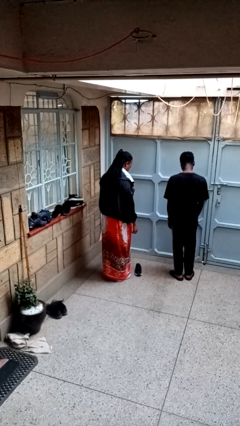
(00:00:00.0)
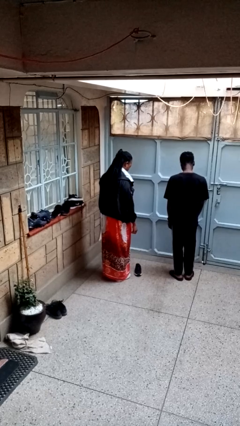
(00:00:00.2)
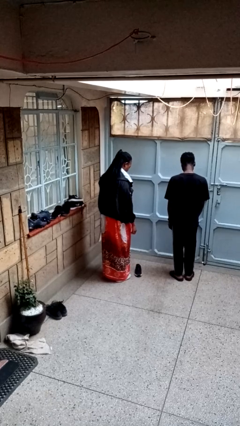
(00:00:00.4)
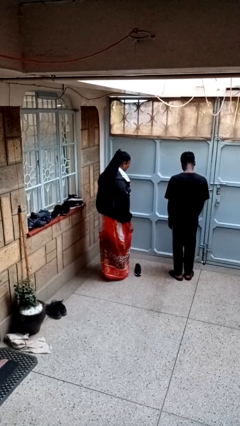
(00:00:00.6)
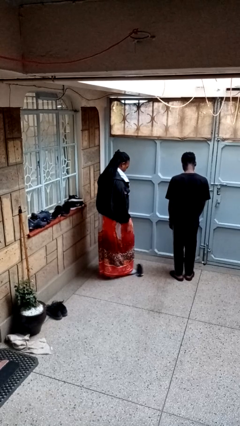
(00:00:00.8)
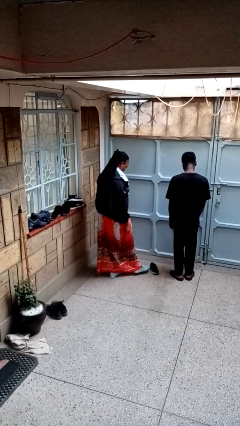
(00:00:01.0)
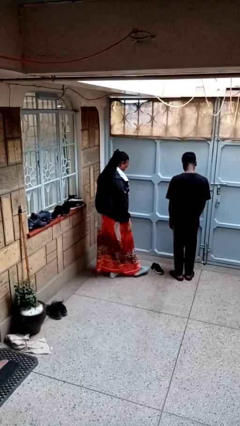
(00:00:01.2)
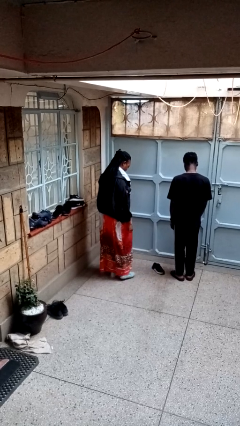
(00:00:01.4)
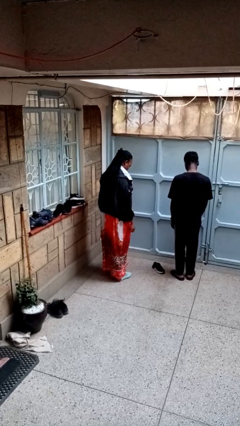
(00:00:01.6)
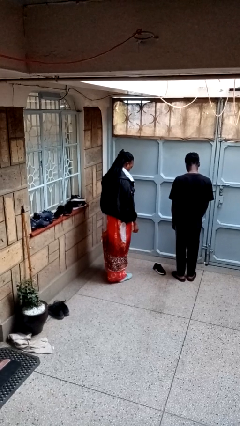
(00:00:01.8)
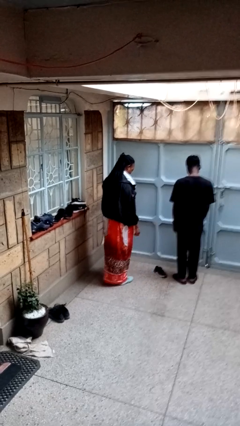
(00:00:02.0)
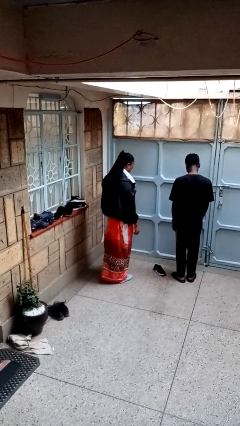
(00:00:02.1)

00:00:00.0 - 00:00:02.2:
person kicks object to person

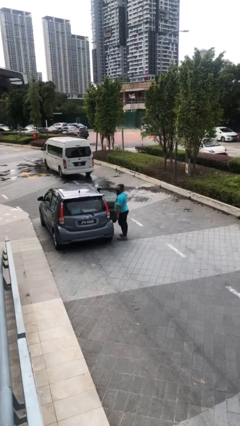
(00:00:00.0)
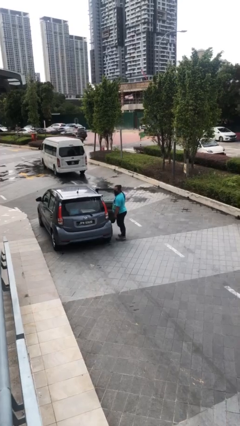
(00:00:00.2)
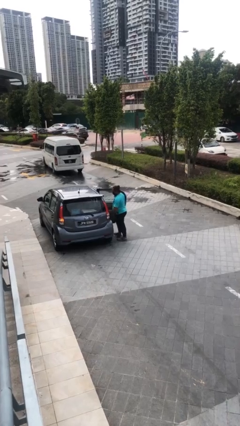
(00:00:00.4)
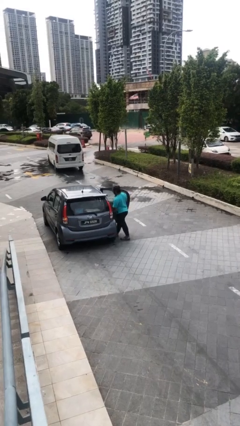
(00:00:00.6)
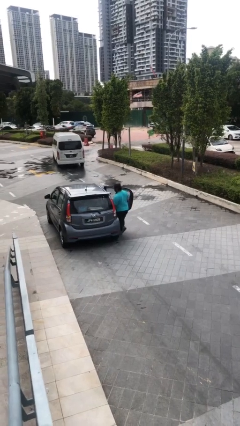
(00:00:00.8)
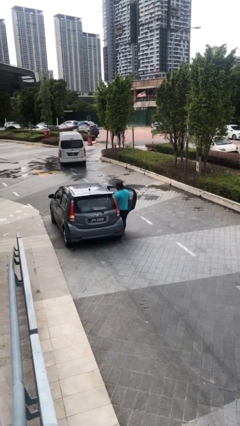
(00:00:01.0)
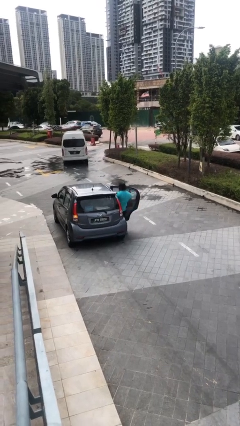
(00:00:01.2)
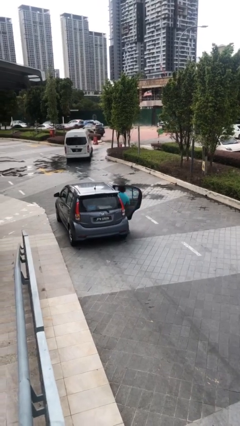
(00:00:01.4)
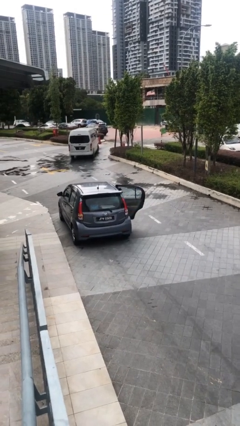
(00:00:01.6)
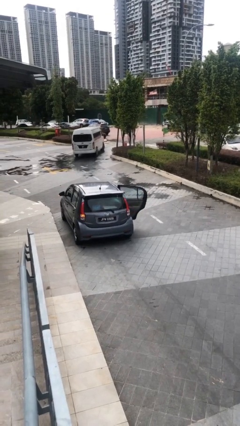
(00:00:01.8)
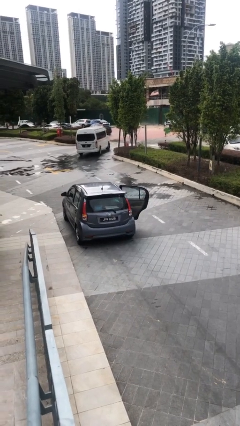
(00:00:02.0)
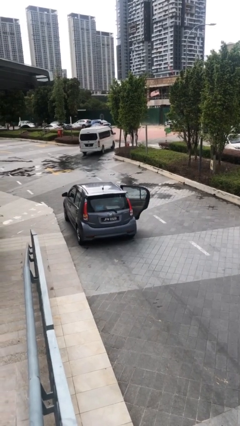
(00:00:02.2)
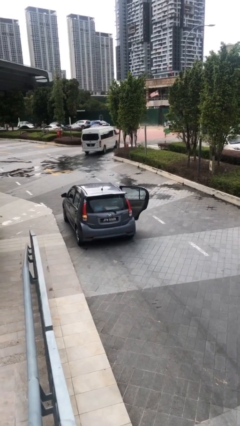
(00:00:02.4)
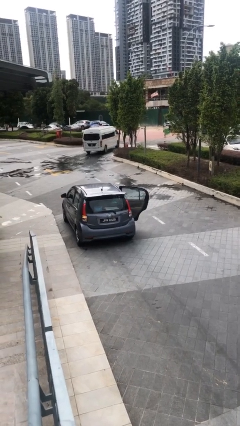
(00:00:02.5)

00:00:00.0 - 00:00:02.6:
person enters car

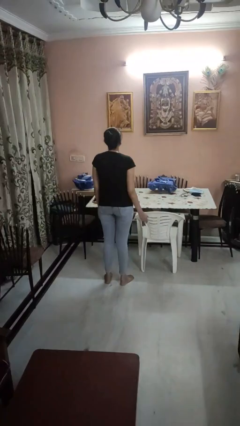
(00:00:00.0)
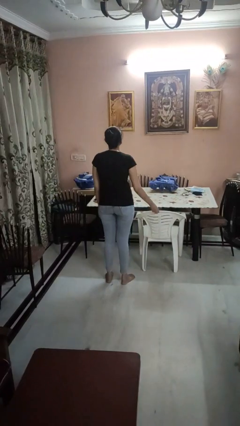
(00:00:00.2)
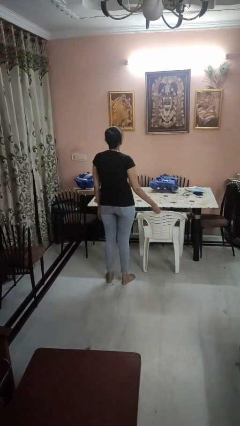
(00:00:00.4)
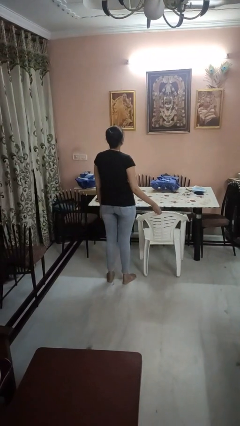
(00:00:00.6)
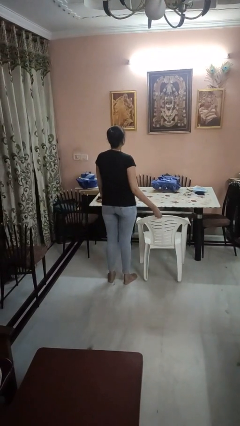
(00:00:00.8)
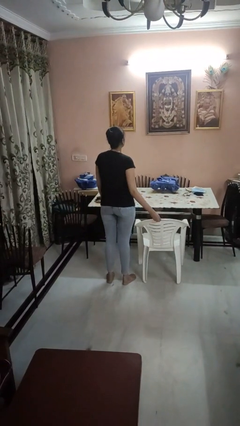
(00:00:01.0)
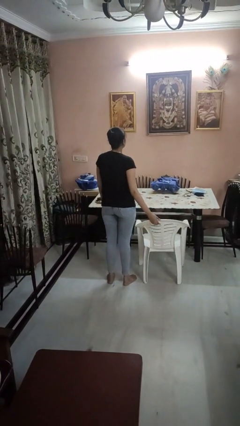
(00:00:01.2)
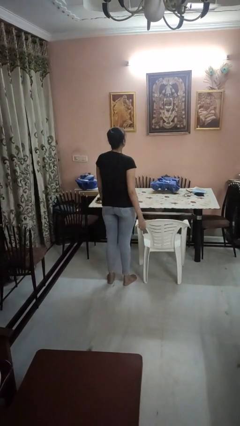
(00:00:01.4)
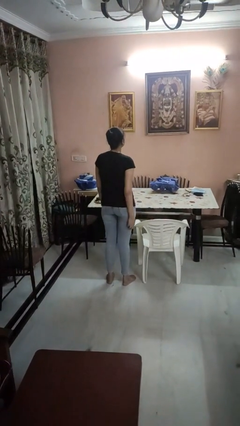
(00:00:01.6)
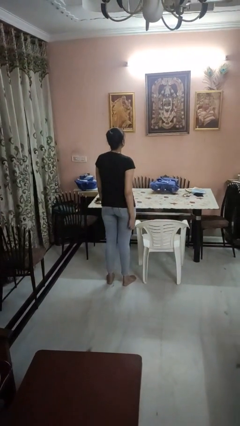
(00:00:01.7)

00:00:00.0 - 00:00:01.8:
person pulls out chair

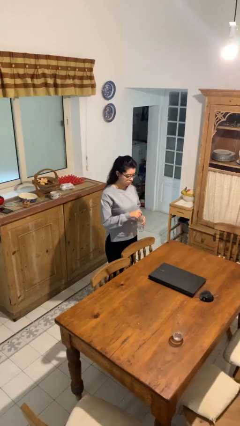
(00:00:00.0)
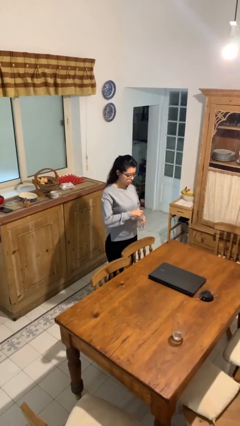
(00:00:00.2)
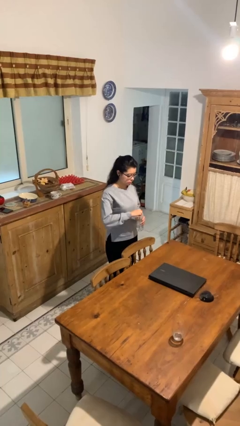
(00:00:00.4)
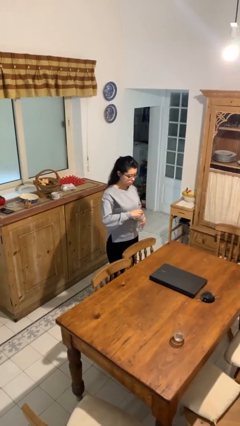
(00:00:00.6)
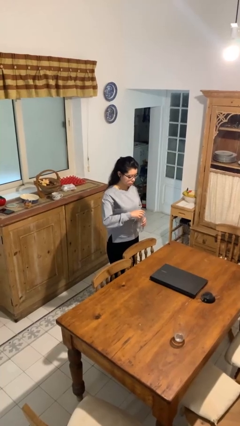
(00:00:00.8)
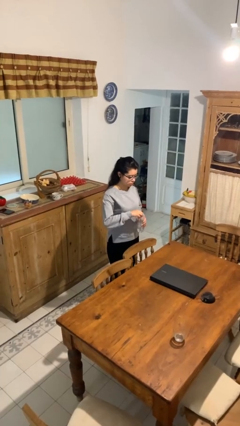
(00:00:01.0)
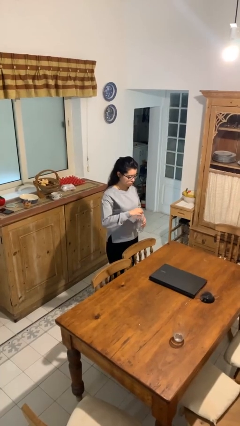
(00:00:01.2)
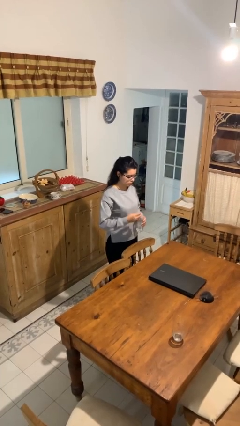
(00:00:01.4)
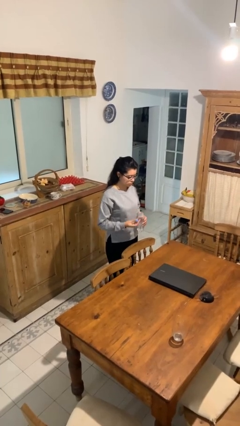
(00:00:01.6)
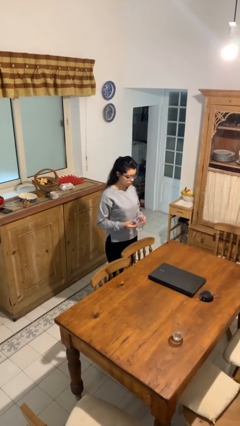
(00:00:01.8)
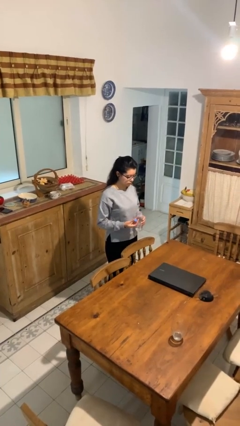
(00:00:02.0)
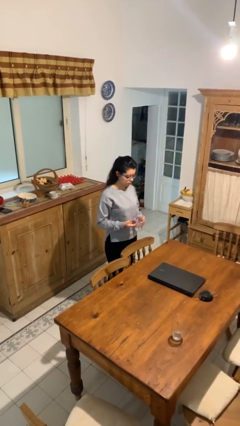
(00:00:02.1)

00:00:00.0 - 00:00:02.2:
person unscrews lid from bottle

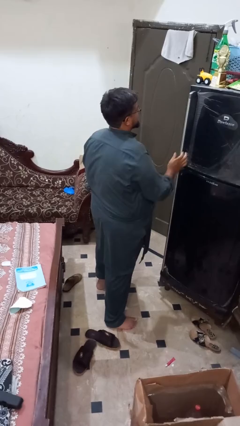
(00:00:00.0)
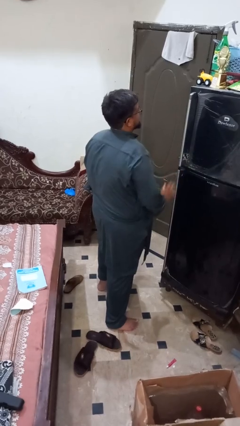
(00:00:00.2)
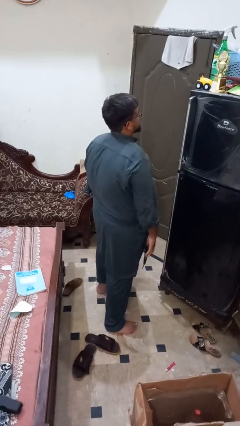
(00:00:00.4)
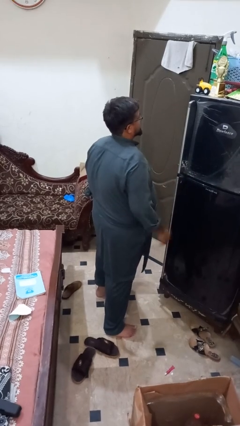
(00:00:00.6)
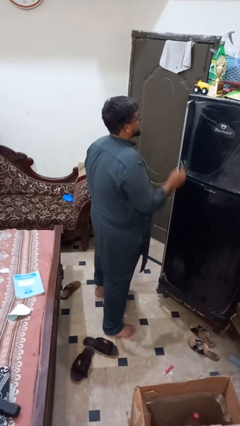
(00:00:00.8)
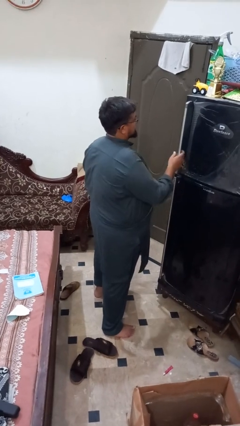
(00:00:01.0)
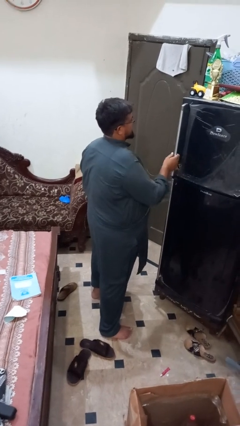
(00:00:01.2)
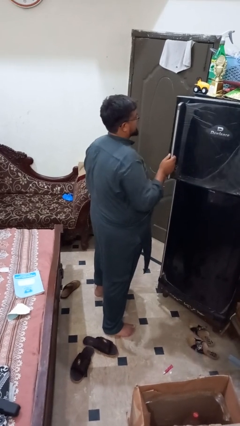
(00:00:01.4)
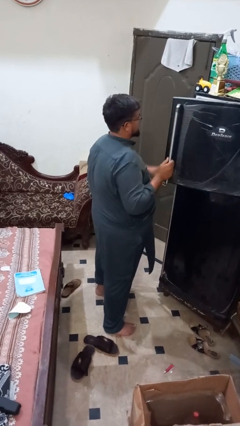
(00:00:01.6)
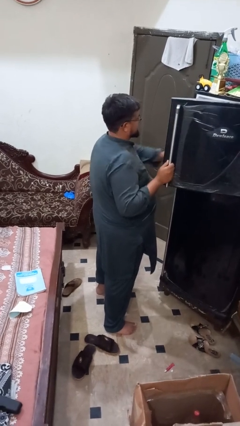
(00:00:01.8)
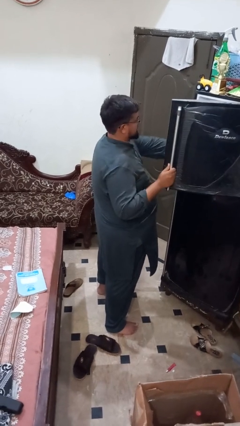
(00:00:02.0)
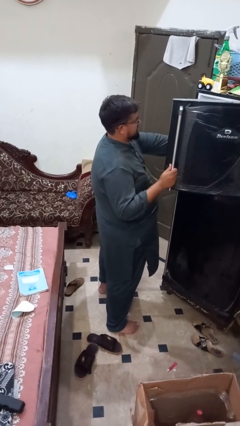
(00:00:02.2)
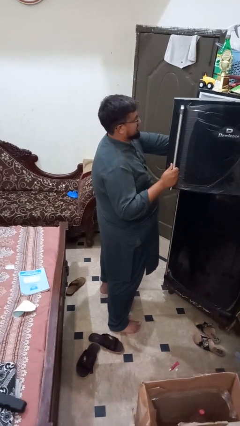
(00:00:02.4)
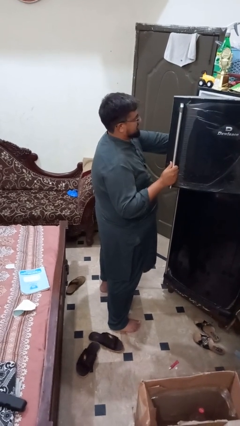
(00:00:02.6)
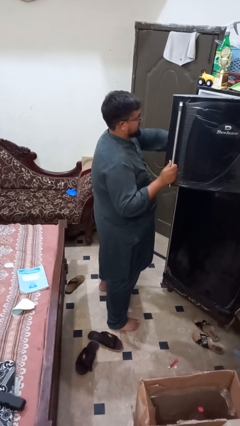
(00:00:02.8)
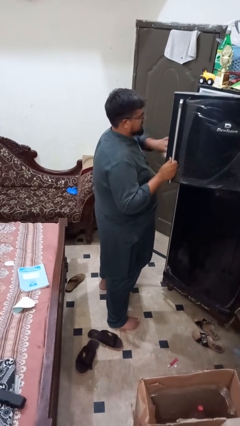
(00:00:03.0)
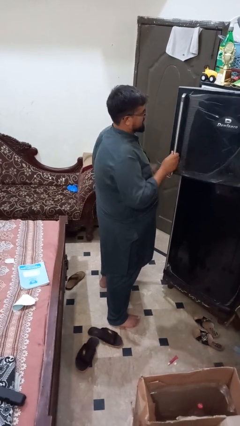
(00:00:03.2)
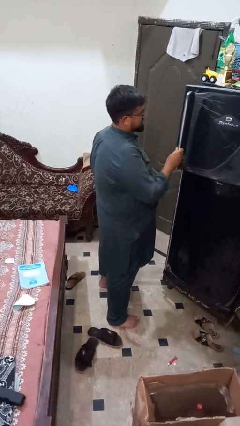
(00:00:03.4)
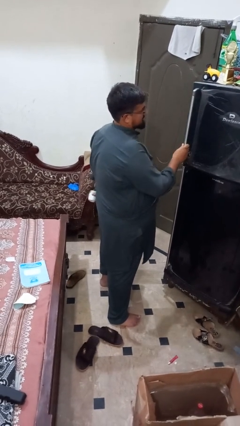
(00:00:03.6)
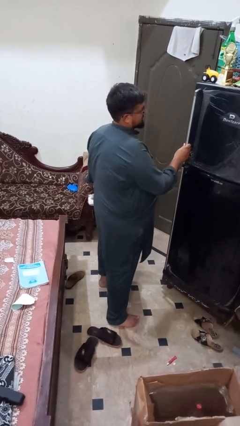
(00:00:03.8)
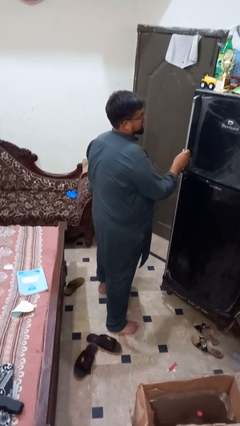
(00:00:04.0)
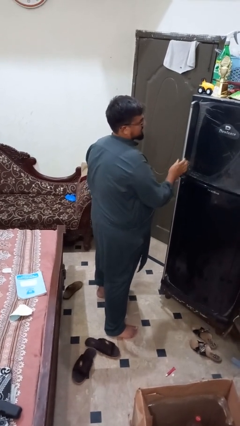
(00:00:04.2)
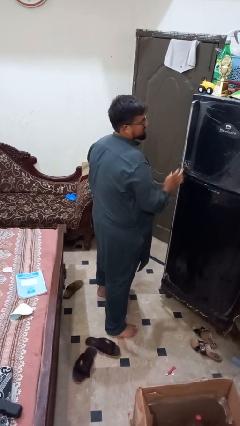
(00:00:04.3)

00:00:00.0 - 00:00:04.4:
person takes object from refrigerator

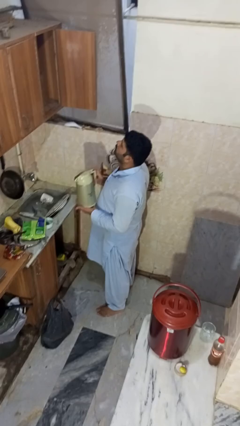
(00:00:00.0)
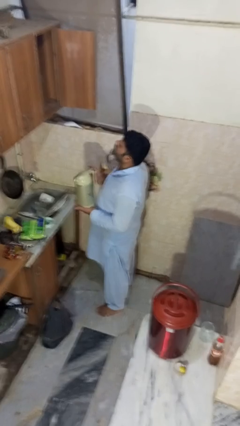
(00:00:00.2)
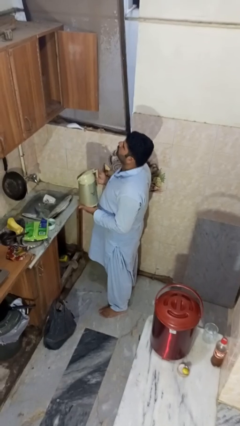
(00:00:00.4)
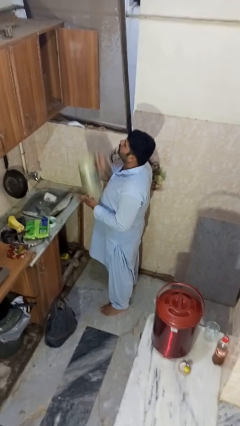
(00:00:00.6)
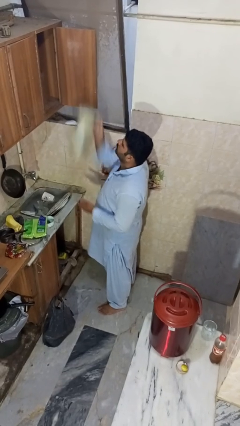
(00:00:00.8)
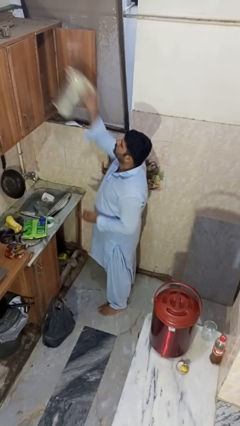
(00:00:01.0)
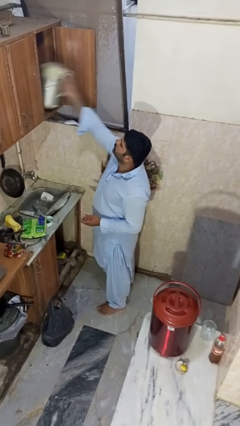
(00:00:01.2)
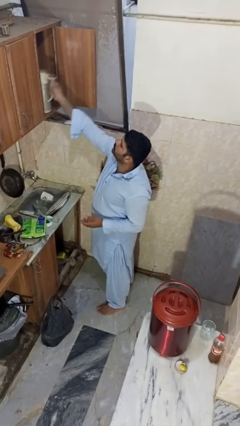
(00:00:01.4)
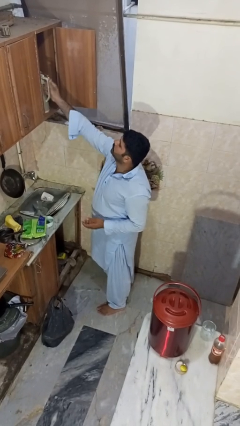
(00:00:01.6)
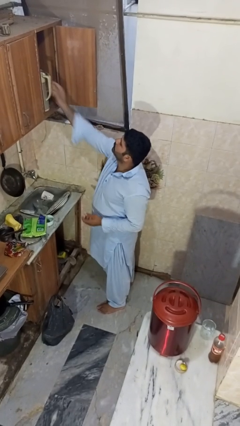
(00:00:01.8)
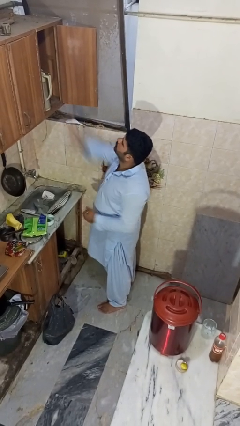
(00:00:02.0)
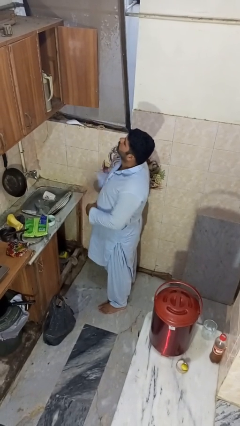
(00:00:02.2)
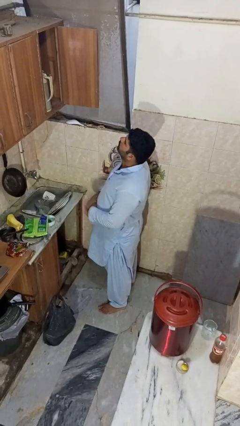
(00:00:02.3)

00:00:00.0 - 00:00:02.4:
person puts object in cabinet

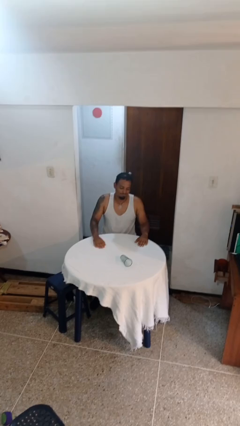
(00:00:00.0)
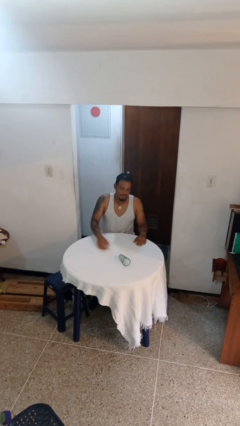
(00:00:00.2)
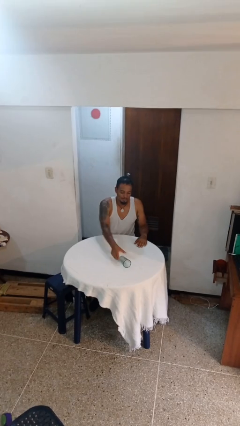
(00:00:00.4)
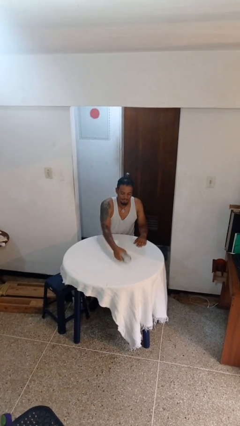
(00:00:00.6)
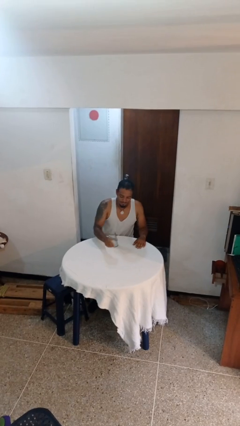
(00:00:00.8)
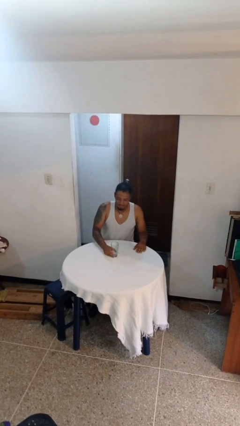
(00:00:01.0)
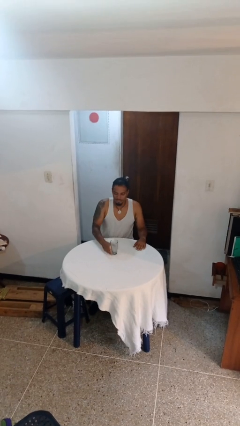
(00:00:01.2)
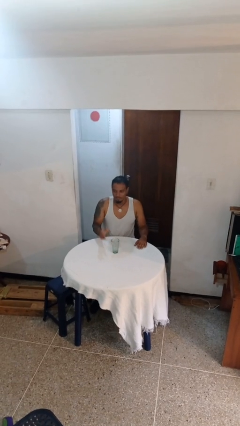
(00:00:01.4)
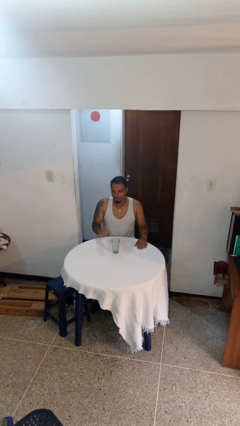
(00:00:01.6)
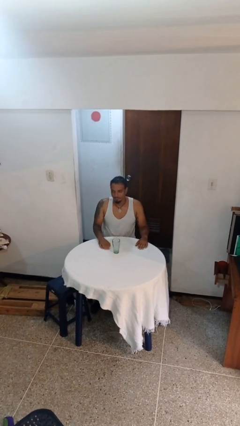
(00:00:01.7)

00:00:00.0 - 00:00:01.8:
person sets upright glass
